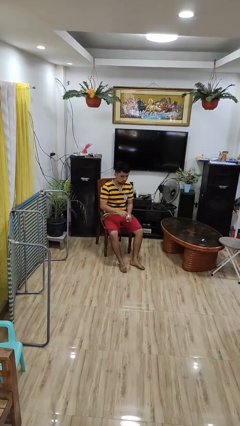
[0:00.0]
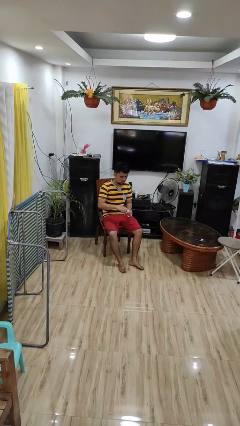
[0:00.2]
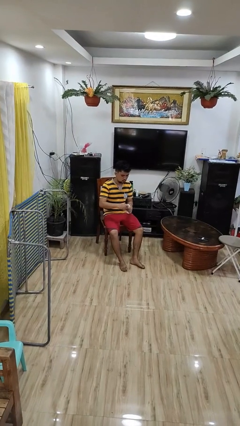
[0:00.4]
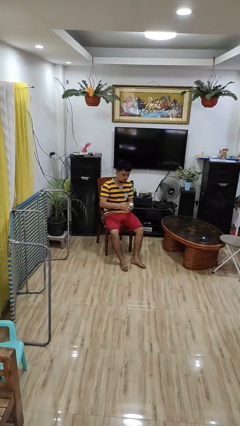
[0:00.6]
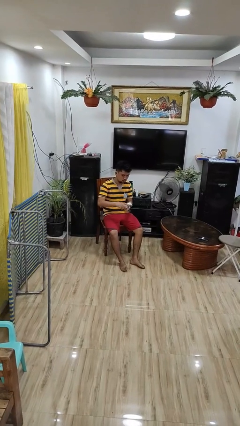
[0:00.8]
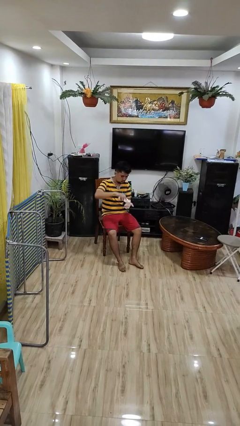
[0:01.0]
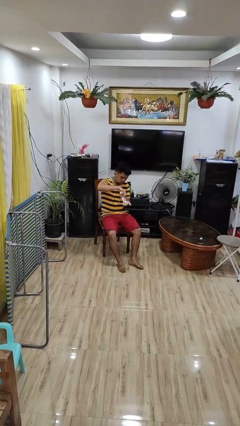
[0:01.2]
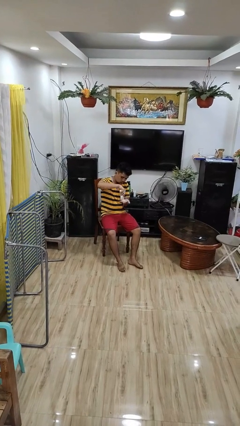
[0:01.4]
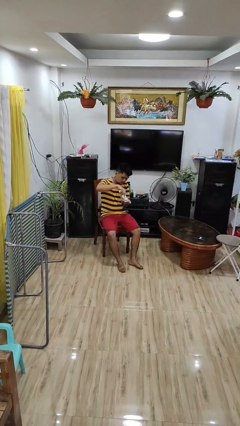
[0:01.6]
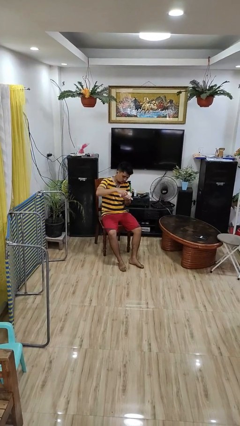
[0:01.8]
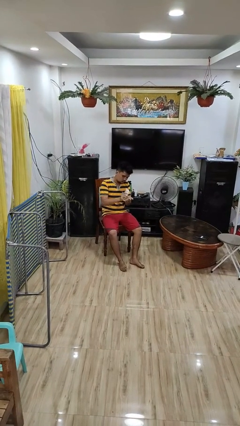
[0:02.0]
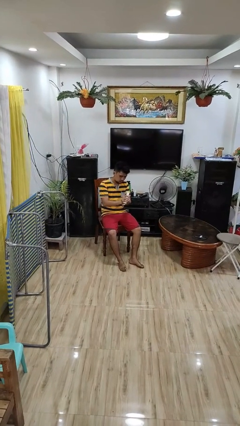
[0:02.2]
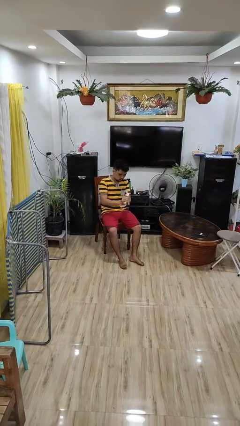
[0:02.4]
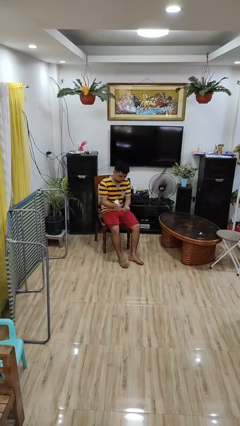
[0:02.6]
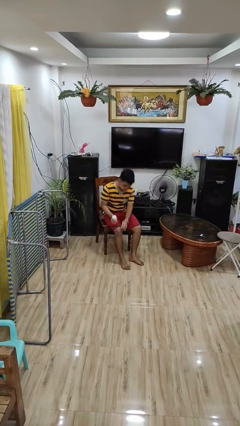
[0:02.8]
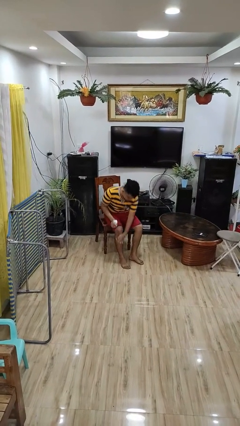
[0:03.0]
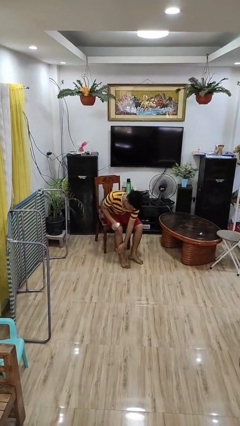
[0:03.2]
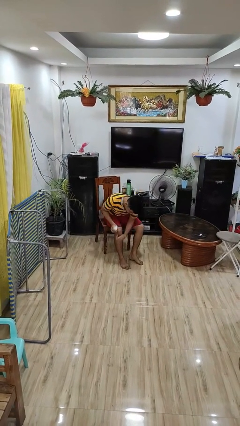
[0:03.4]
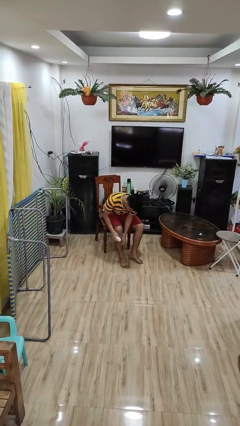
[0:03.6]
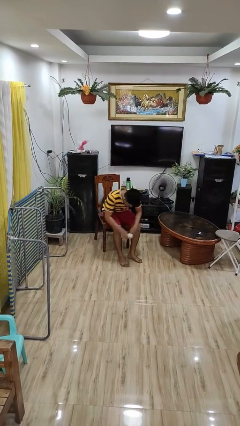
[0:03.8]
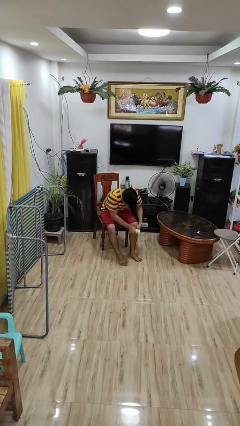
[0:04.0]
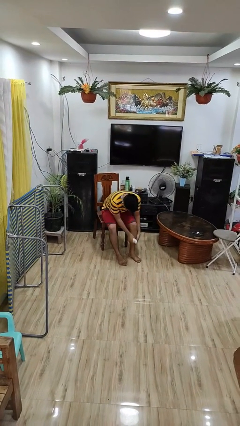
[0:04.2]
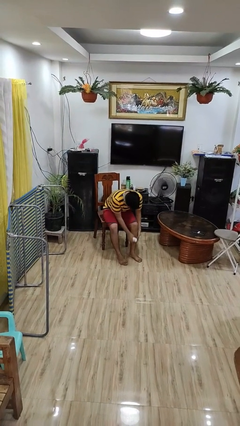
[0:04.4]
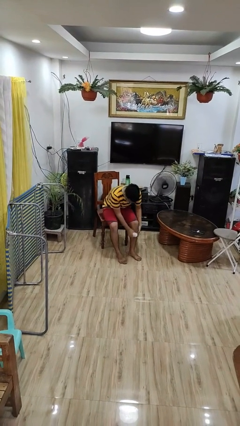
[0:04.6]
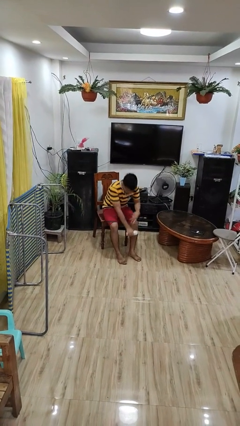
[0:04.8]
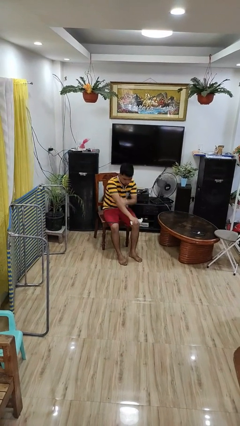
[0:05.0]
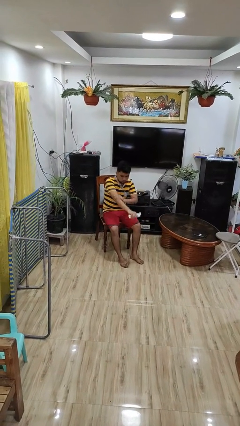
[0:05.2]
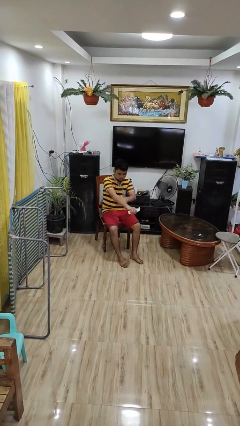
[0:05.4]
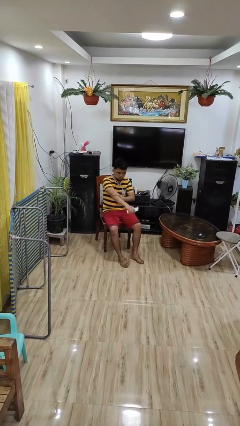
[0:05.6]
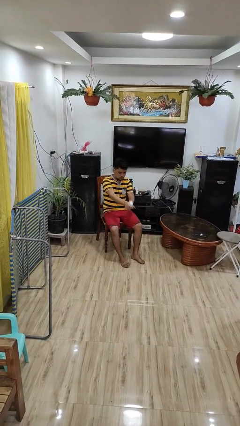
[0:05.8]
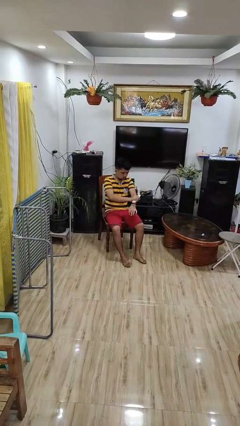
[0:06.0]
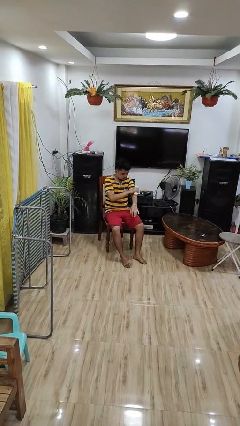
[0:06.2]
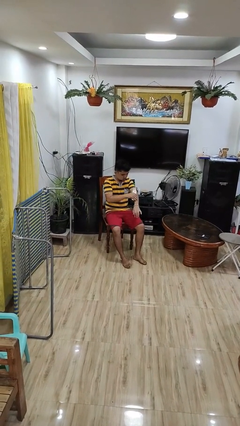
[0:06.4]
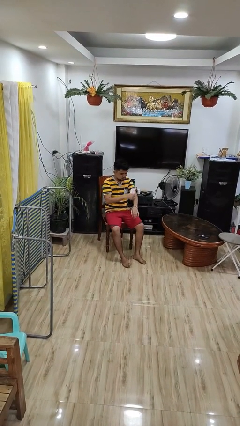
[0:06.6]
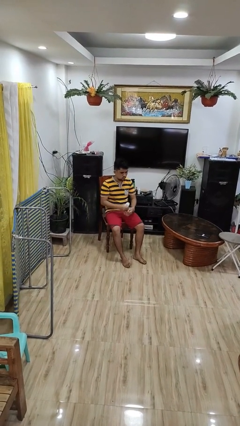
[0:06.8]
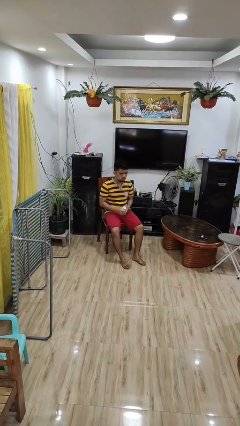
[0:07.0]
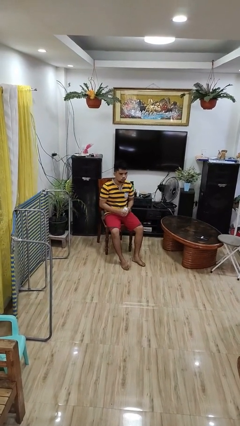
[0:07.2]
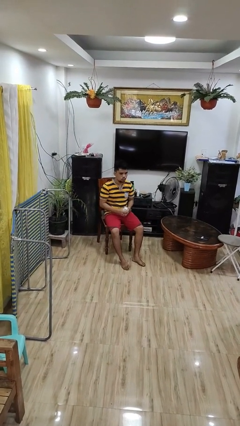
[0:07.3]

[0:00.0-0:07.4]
person applies sunscreen

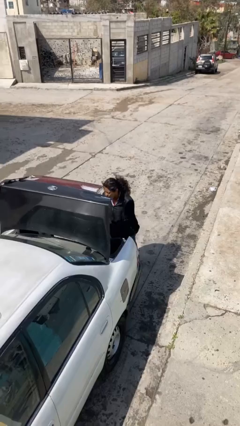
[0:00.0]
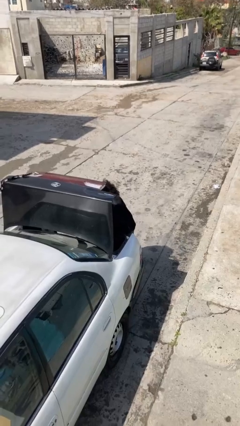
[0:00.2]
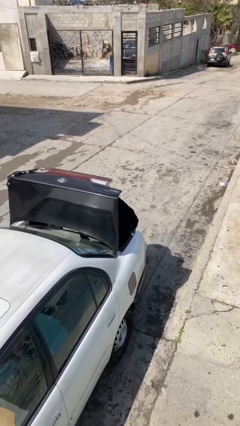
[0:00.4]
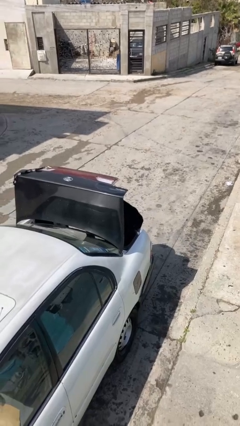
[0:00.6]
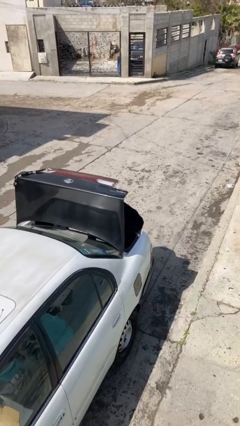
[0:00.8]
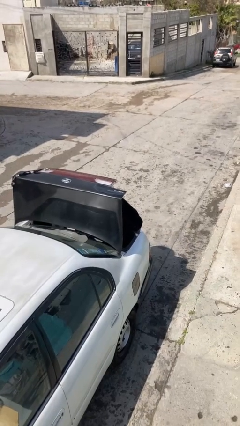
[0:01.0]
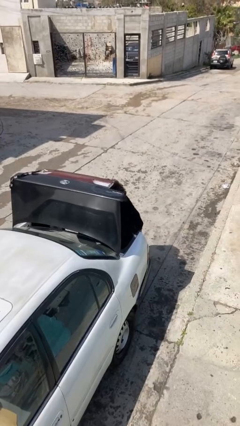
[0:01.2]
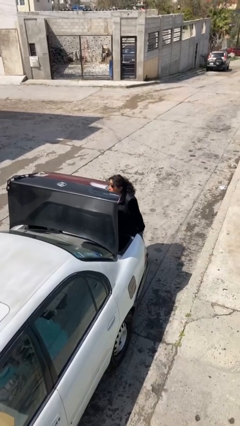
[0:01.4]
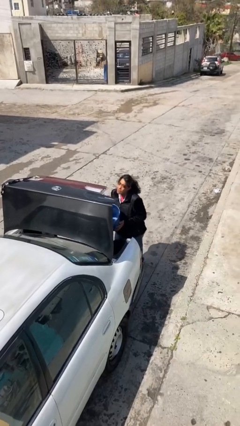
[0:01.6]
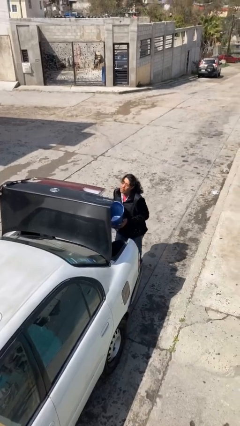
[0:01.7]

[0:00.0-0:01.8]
person unloads car

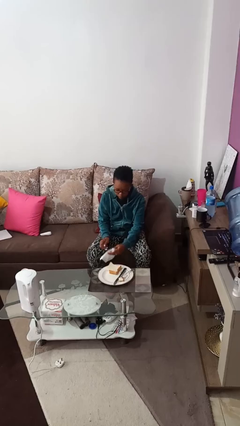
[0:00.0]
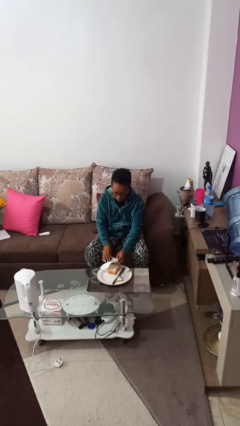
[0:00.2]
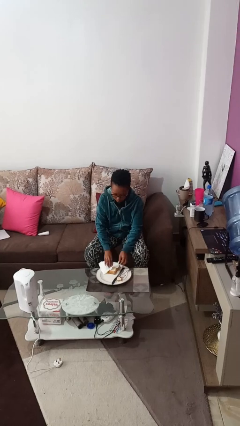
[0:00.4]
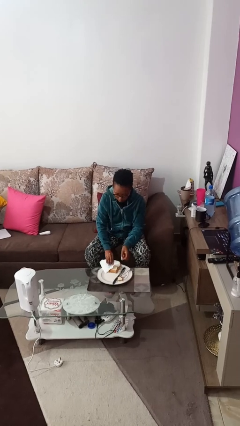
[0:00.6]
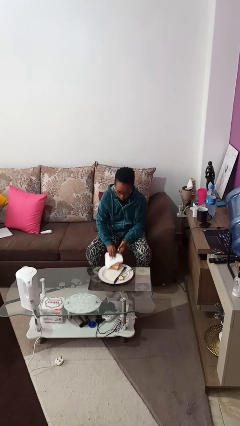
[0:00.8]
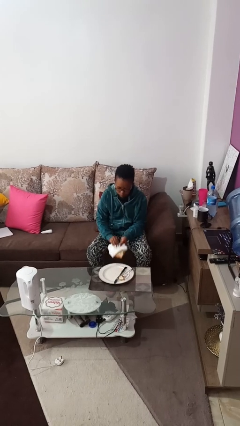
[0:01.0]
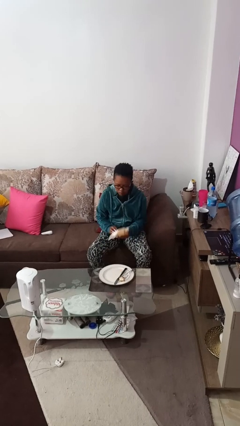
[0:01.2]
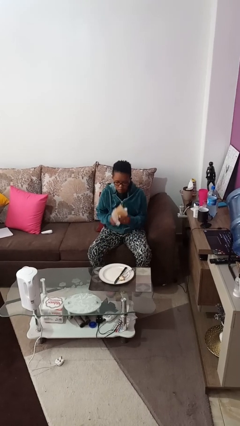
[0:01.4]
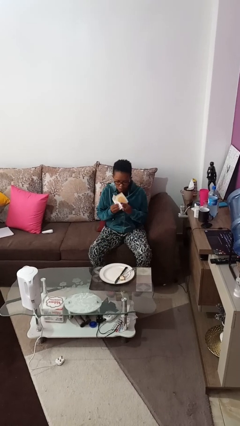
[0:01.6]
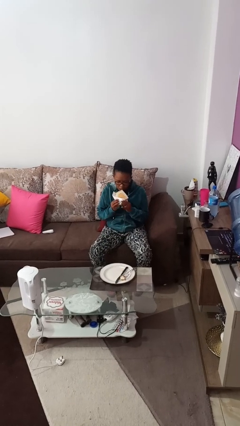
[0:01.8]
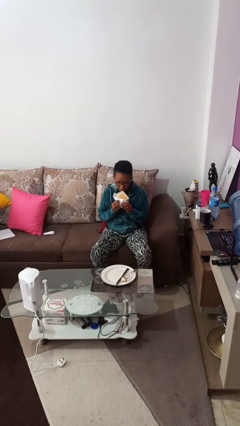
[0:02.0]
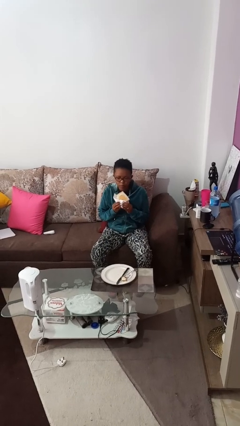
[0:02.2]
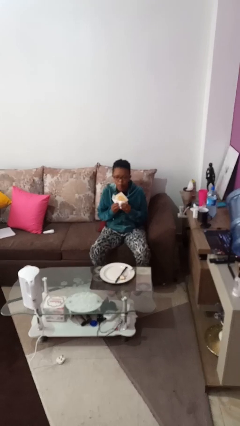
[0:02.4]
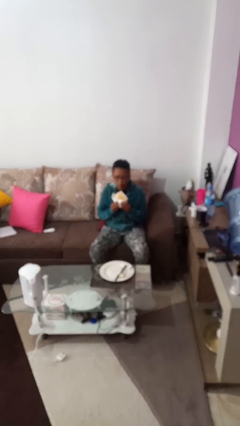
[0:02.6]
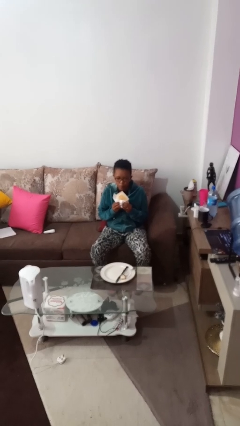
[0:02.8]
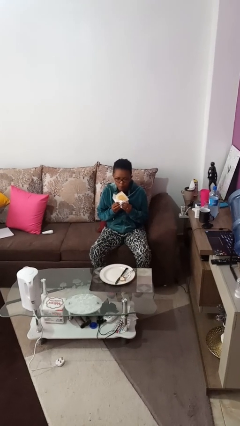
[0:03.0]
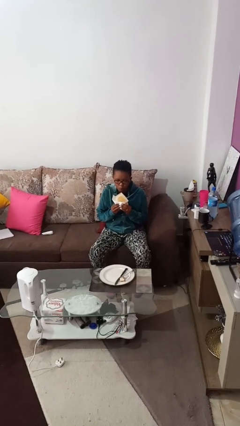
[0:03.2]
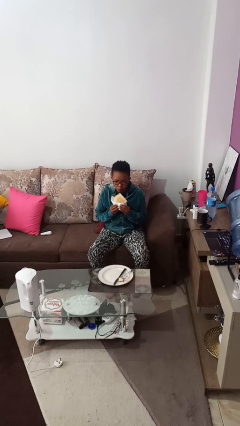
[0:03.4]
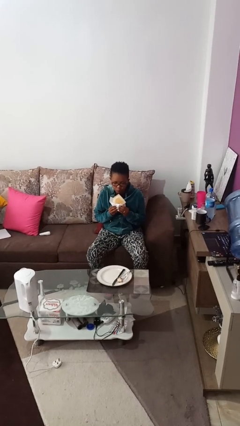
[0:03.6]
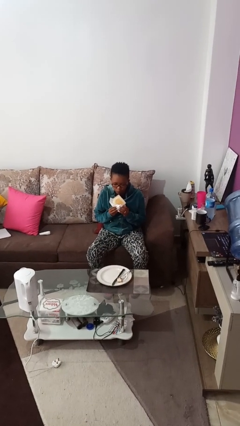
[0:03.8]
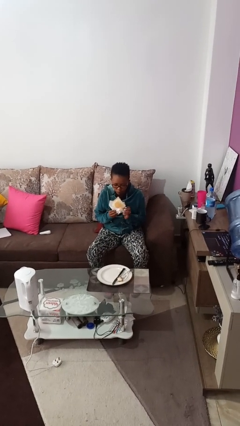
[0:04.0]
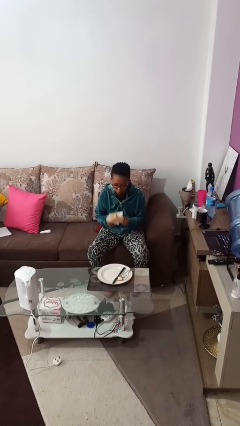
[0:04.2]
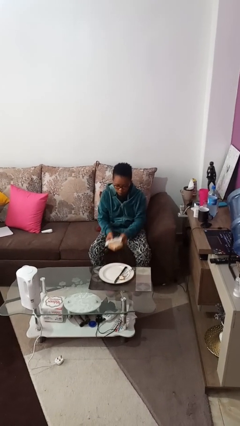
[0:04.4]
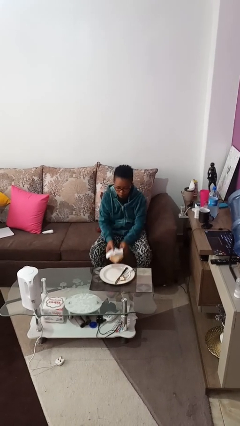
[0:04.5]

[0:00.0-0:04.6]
person eats with hands

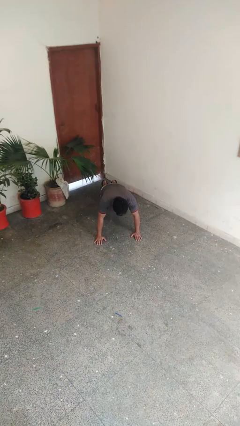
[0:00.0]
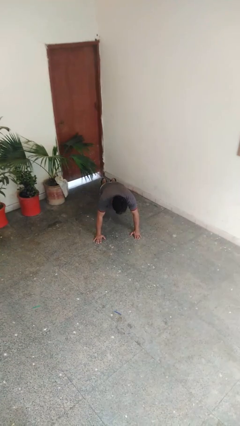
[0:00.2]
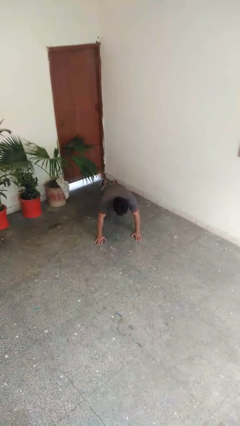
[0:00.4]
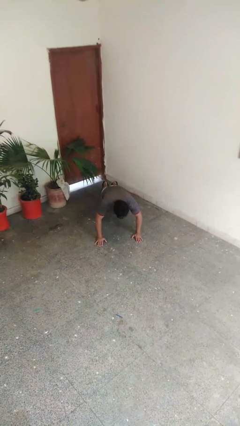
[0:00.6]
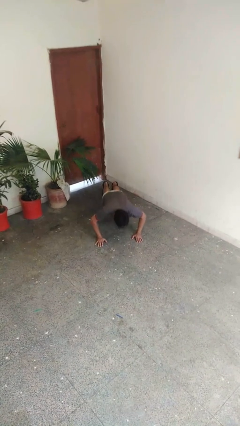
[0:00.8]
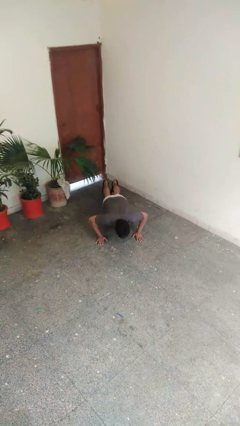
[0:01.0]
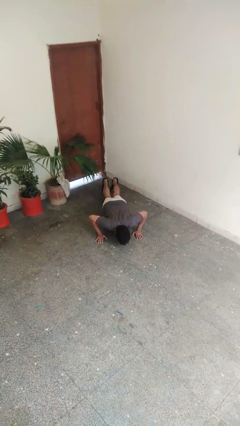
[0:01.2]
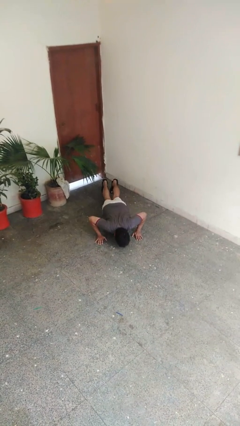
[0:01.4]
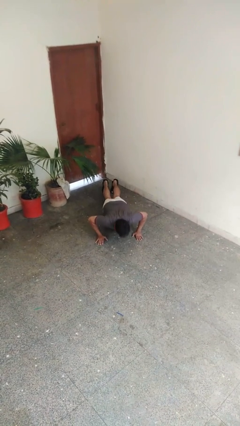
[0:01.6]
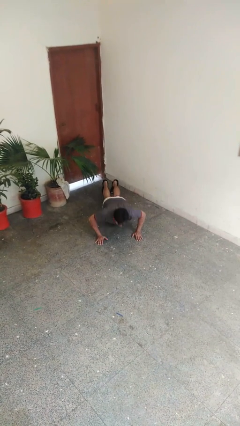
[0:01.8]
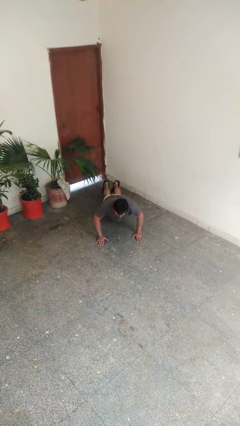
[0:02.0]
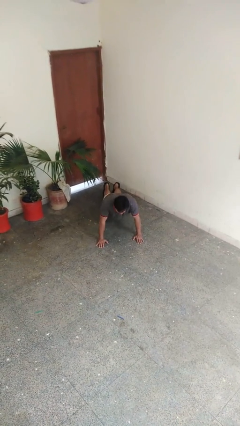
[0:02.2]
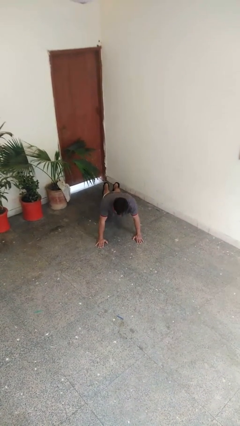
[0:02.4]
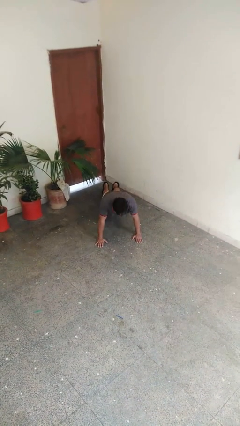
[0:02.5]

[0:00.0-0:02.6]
person exercises with pushup

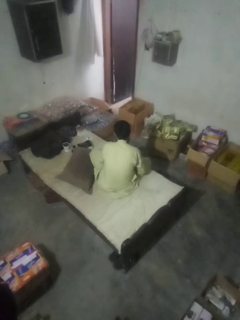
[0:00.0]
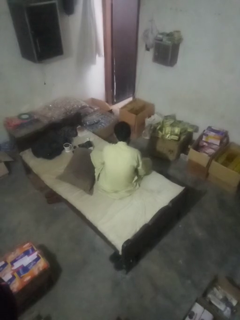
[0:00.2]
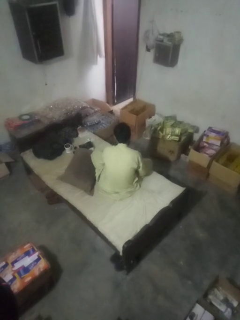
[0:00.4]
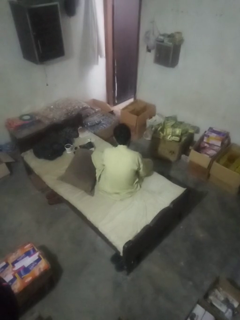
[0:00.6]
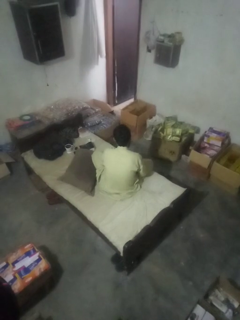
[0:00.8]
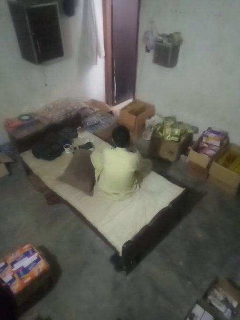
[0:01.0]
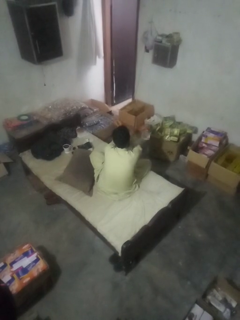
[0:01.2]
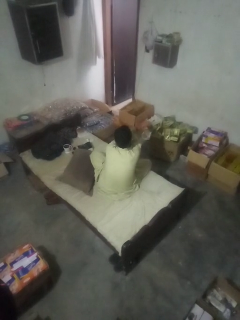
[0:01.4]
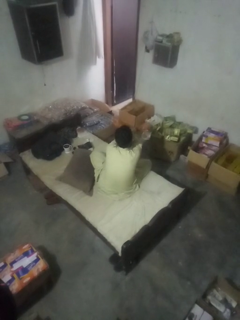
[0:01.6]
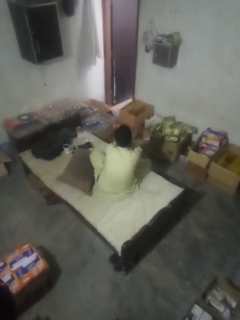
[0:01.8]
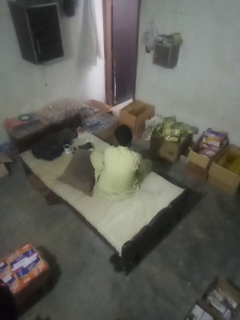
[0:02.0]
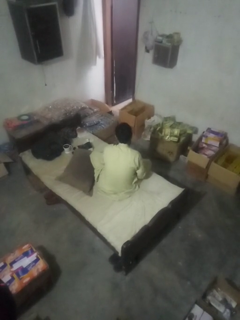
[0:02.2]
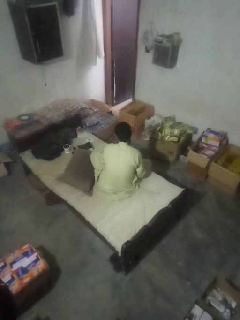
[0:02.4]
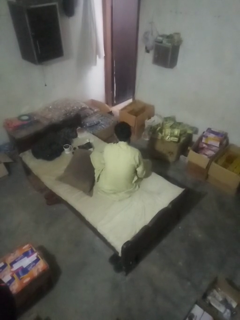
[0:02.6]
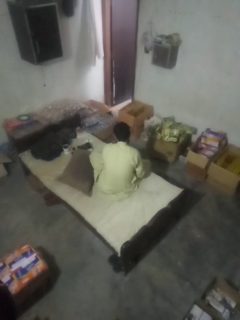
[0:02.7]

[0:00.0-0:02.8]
person gestures arms x
